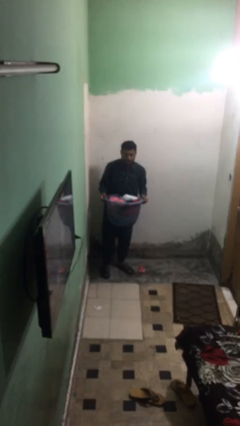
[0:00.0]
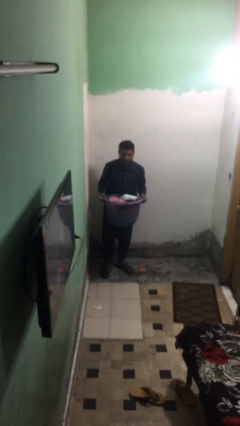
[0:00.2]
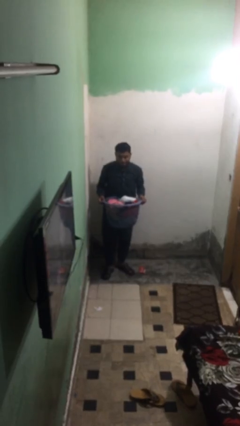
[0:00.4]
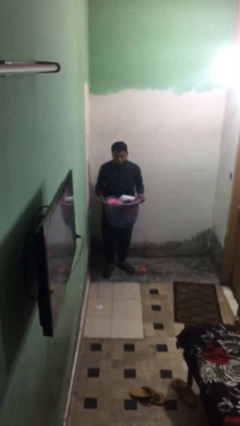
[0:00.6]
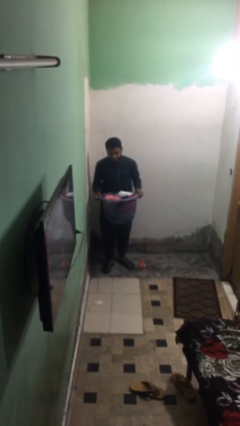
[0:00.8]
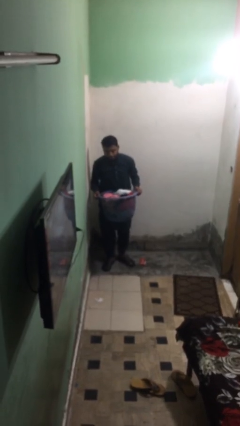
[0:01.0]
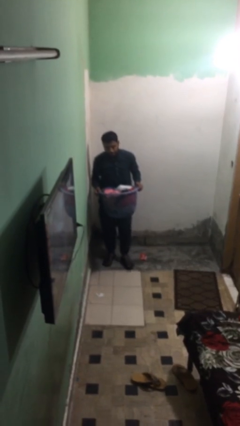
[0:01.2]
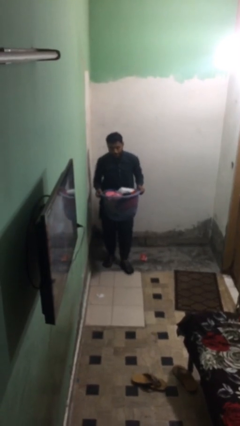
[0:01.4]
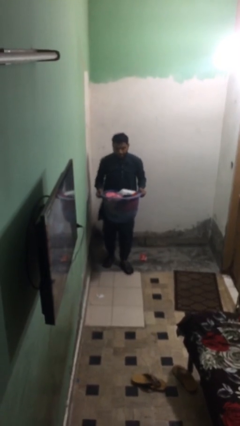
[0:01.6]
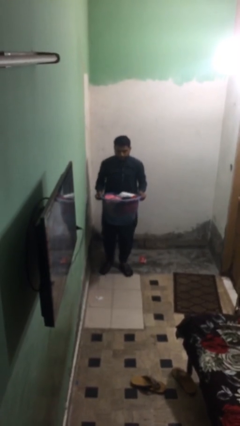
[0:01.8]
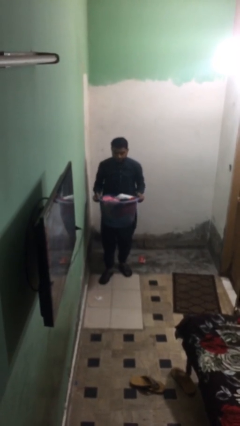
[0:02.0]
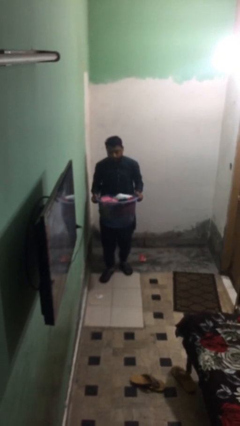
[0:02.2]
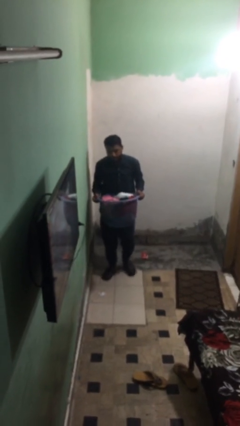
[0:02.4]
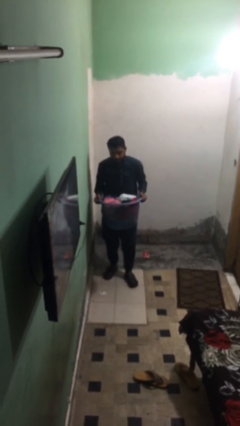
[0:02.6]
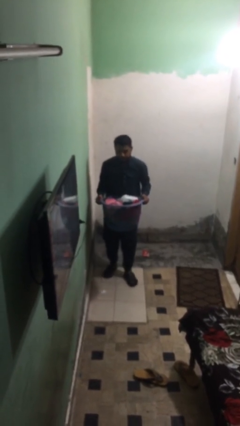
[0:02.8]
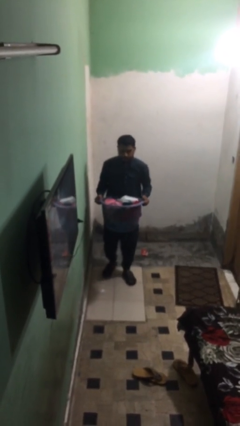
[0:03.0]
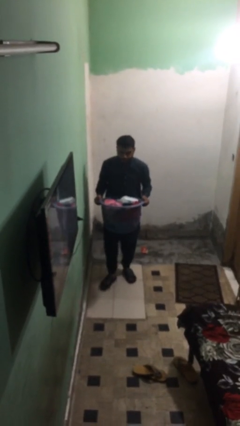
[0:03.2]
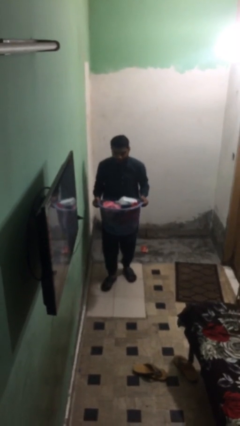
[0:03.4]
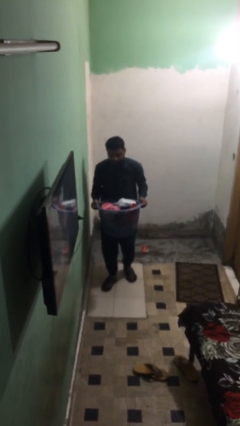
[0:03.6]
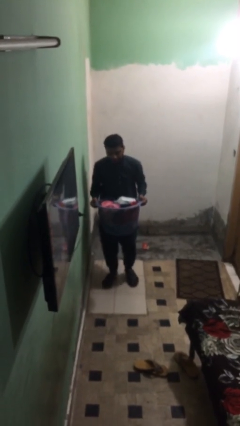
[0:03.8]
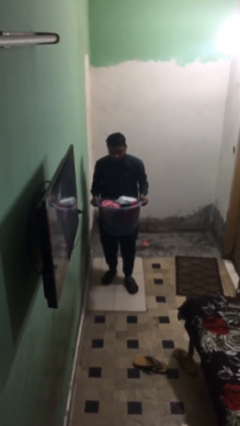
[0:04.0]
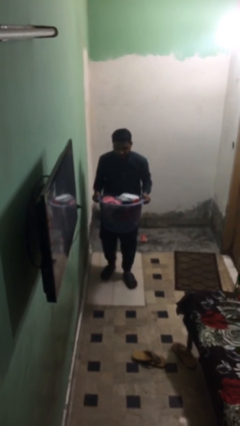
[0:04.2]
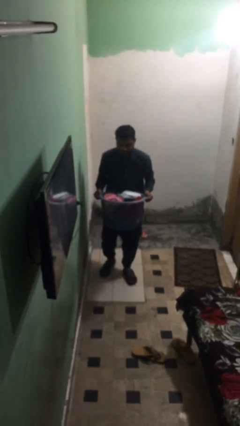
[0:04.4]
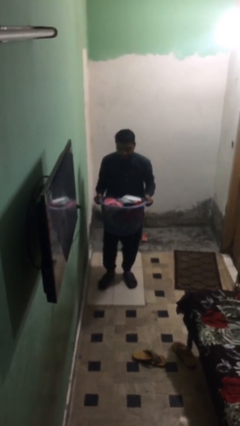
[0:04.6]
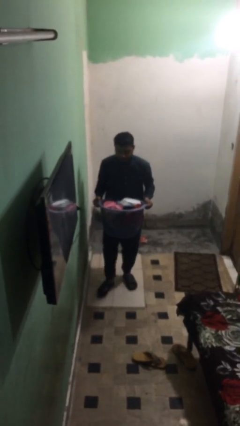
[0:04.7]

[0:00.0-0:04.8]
person carries heavy object

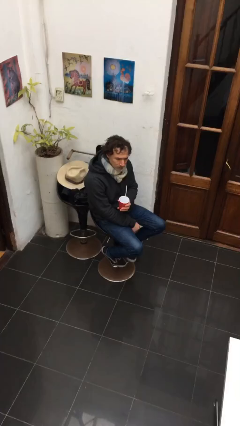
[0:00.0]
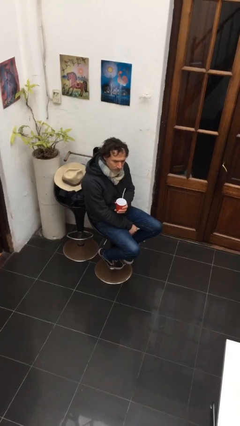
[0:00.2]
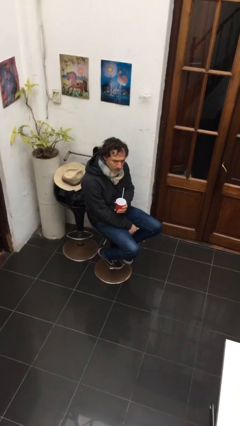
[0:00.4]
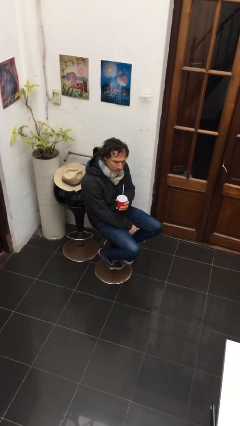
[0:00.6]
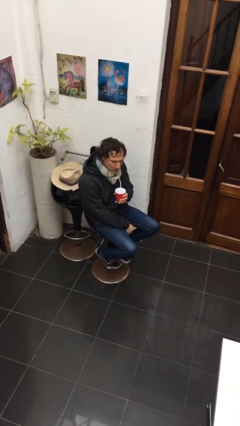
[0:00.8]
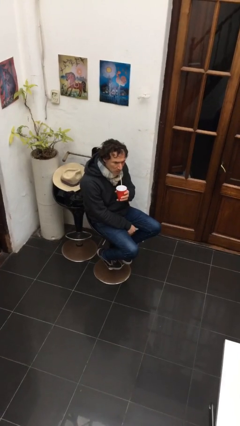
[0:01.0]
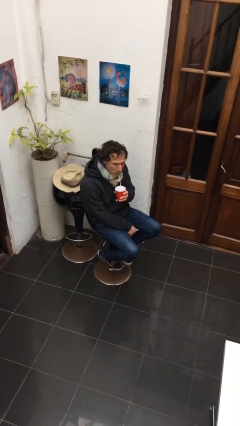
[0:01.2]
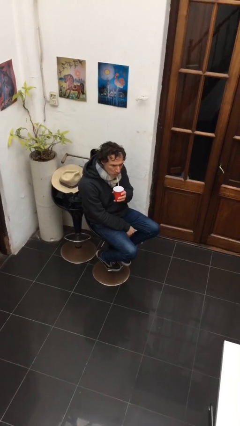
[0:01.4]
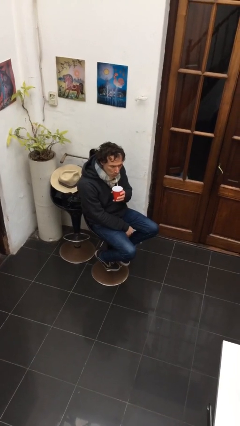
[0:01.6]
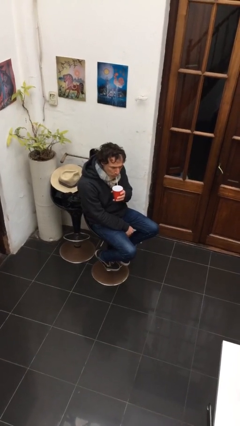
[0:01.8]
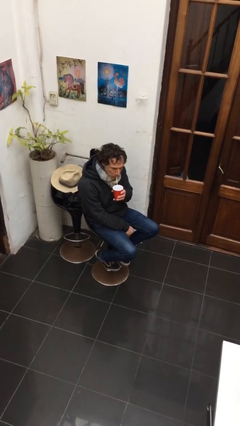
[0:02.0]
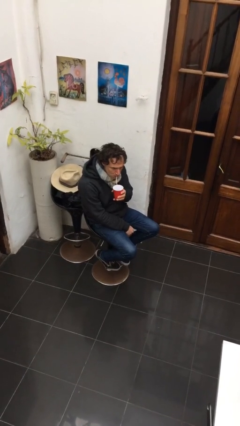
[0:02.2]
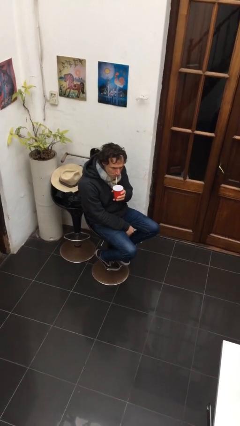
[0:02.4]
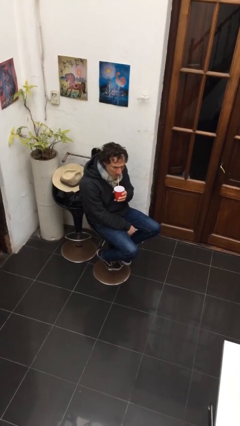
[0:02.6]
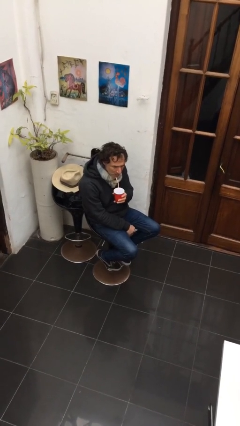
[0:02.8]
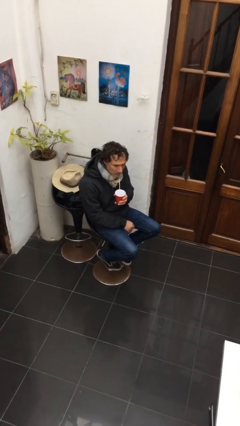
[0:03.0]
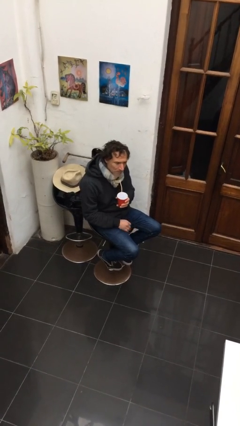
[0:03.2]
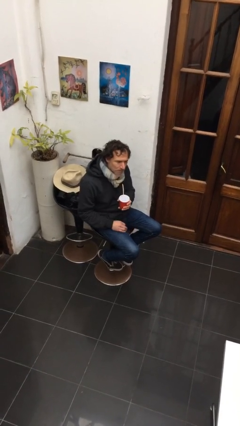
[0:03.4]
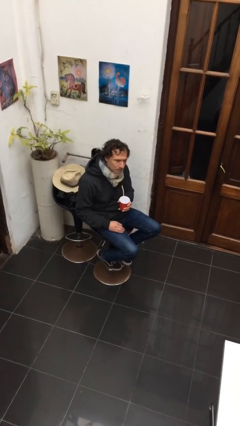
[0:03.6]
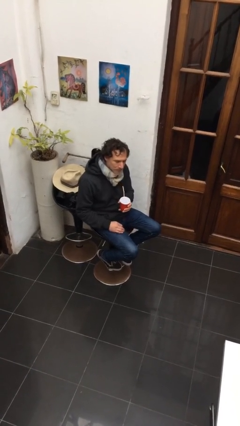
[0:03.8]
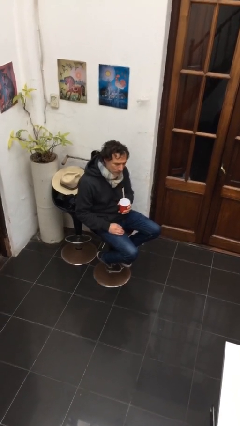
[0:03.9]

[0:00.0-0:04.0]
person drinks from straw

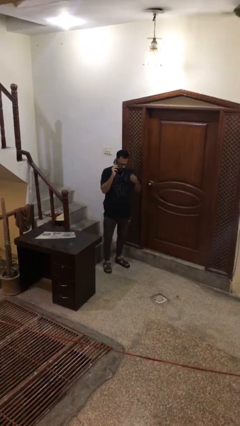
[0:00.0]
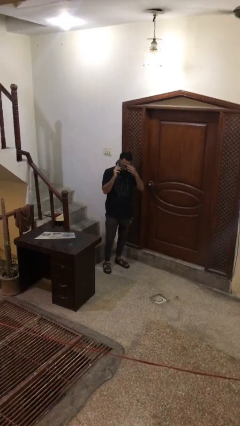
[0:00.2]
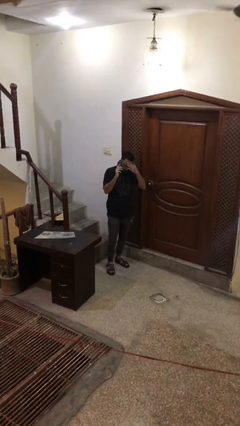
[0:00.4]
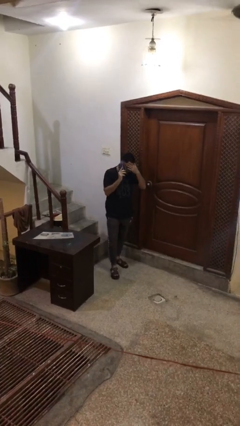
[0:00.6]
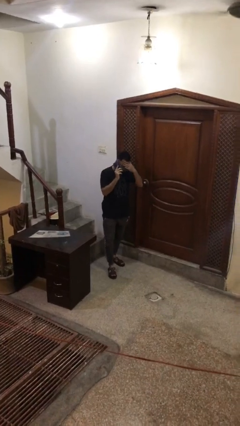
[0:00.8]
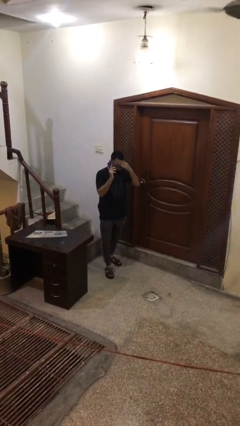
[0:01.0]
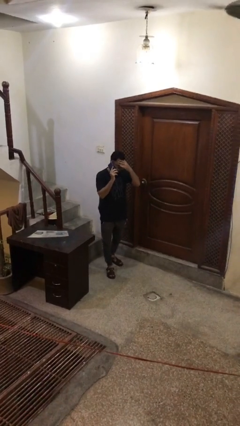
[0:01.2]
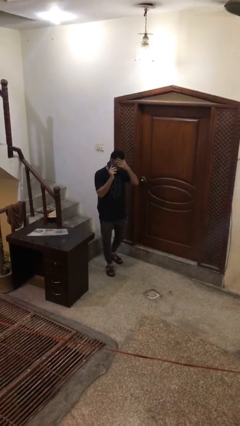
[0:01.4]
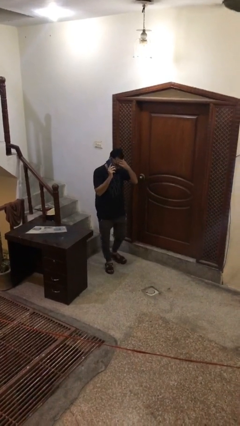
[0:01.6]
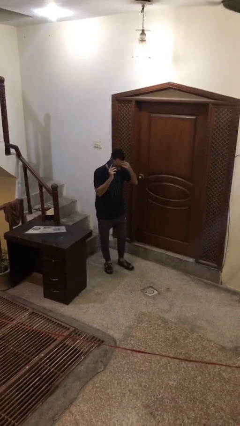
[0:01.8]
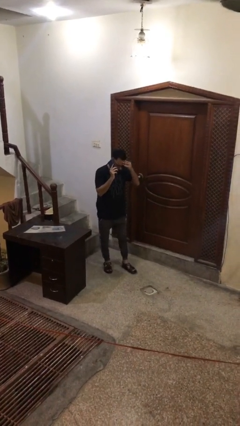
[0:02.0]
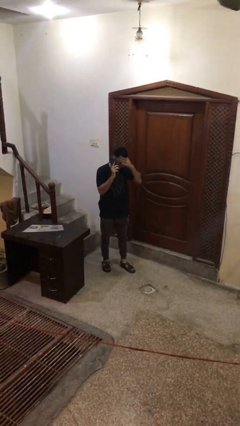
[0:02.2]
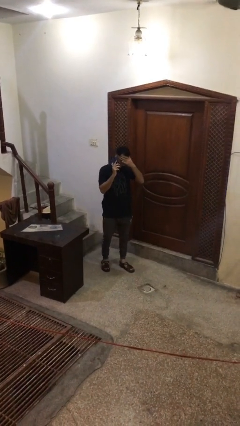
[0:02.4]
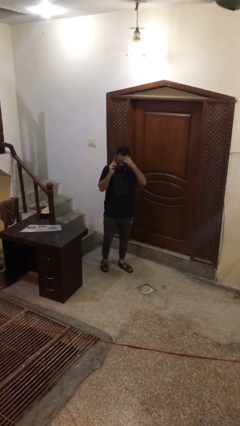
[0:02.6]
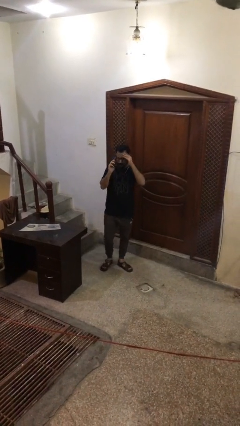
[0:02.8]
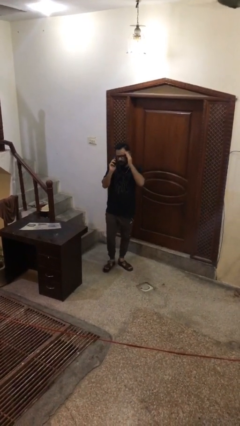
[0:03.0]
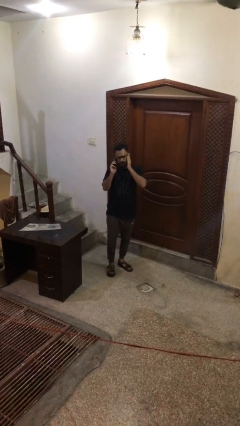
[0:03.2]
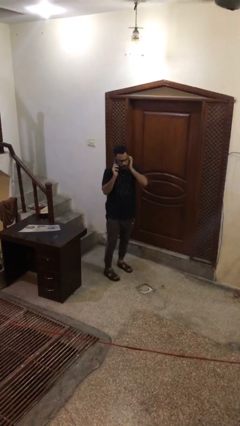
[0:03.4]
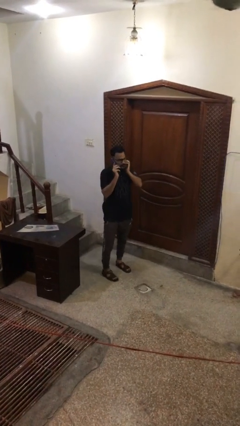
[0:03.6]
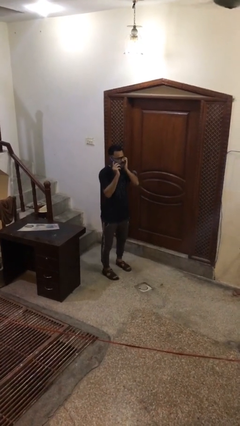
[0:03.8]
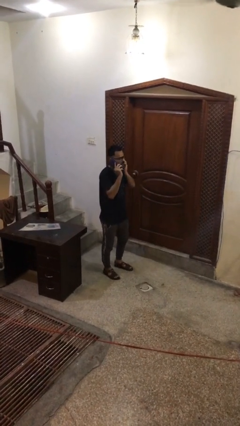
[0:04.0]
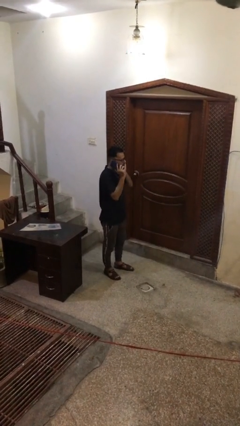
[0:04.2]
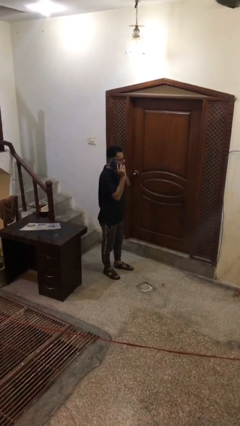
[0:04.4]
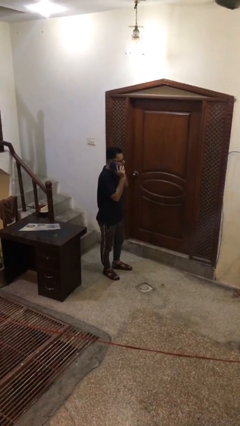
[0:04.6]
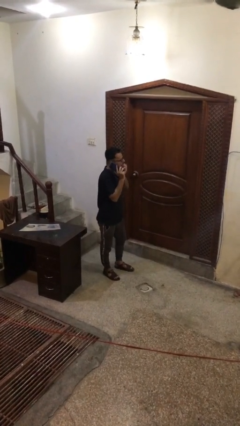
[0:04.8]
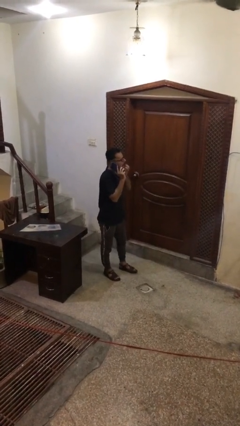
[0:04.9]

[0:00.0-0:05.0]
person talks on phone

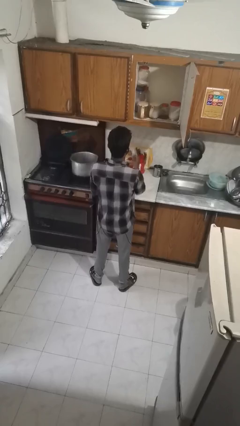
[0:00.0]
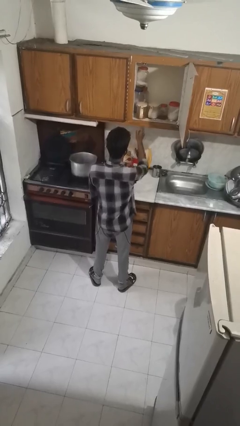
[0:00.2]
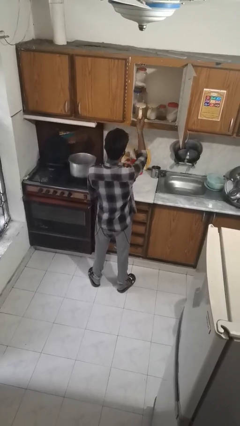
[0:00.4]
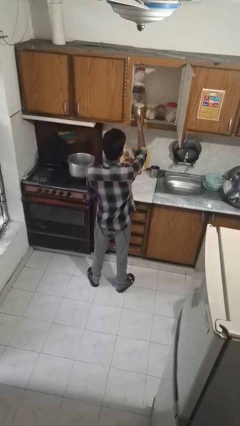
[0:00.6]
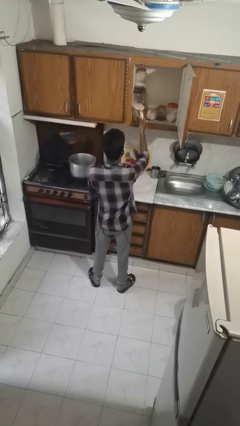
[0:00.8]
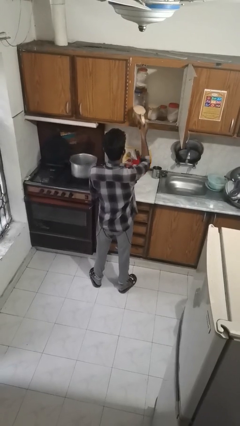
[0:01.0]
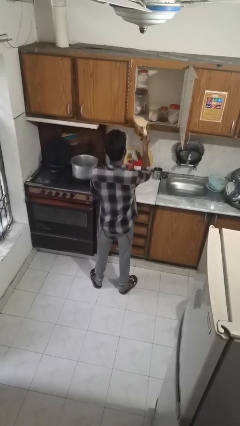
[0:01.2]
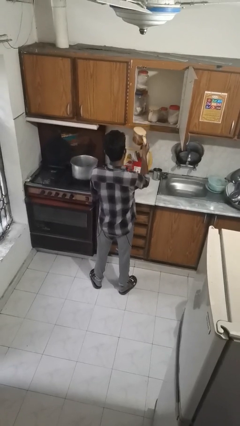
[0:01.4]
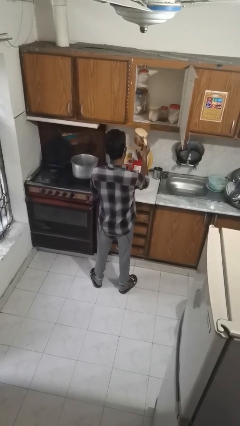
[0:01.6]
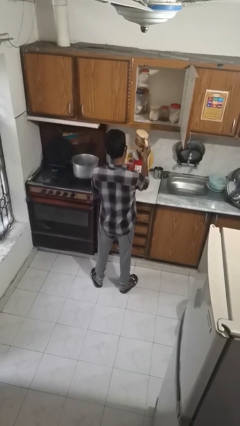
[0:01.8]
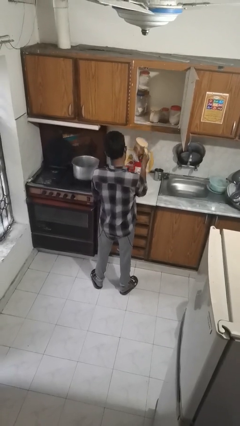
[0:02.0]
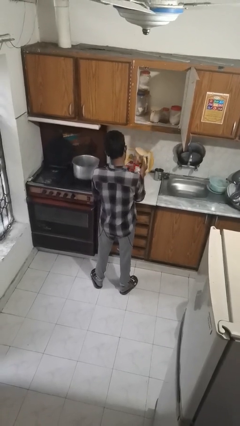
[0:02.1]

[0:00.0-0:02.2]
person picks up object from cabinet

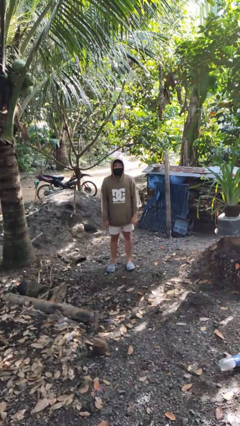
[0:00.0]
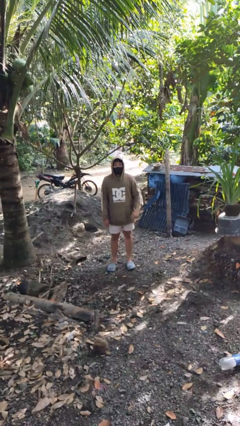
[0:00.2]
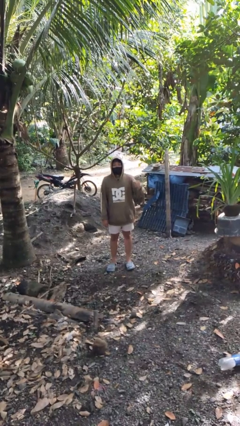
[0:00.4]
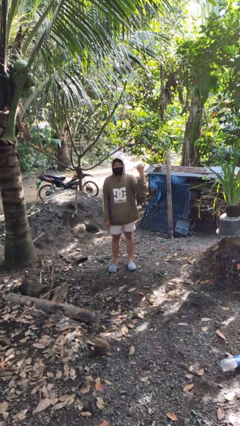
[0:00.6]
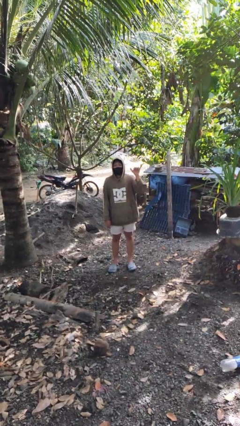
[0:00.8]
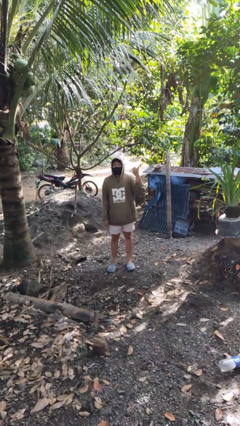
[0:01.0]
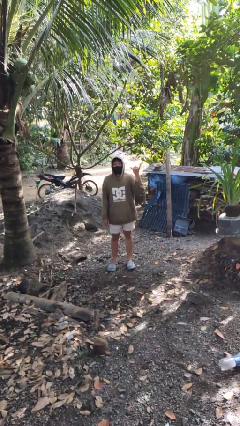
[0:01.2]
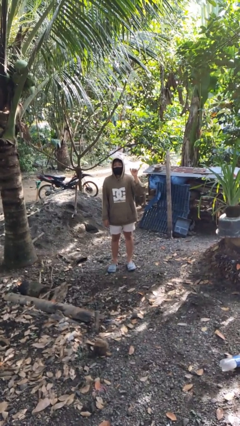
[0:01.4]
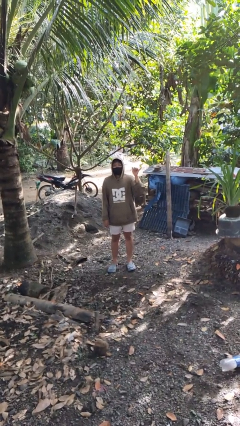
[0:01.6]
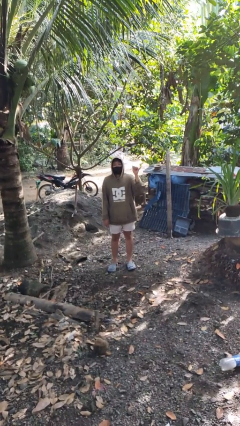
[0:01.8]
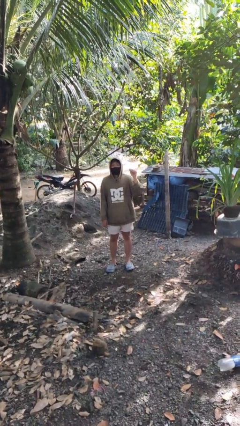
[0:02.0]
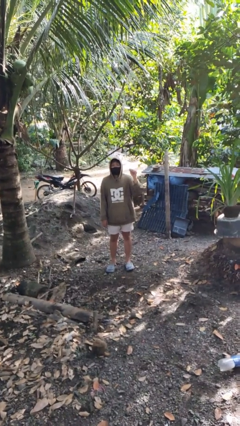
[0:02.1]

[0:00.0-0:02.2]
person gestures hang loose
